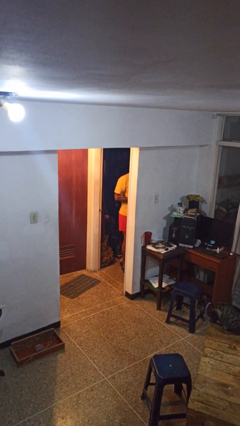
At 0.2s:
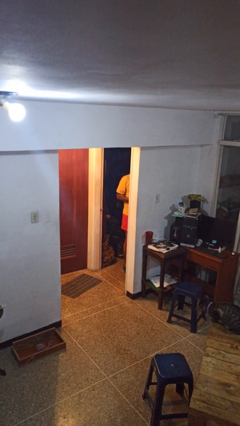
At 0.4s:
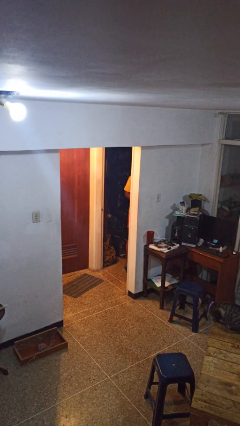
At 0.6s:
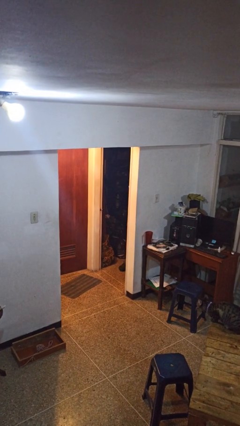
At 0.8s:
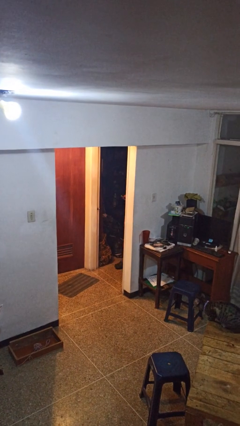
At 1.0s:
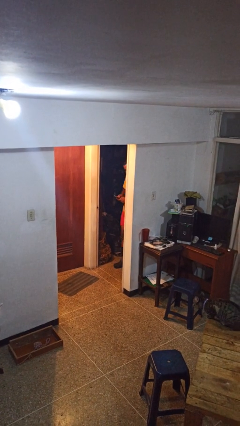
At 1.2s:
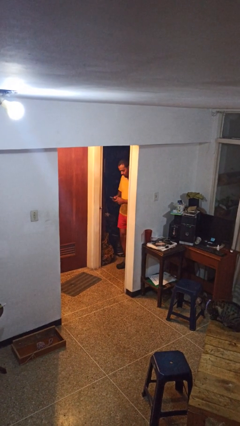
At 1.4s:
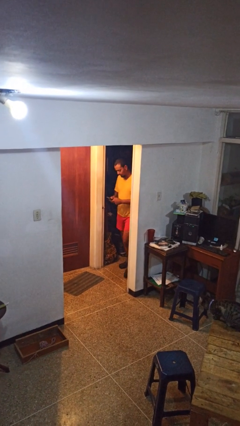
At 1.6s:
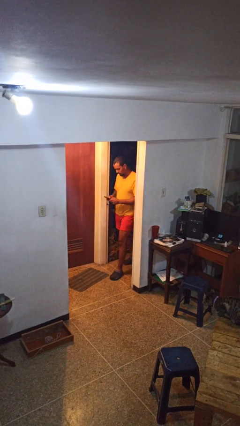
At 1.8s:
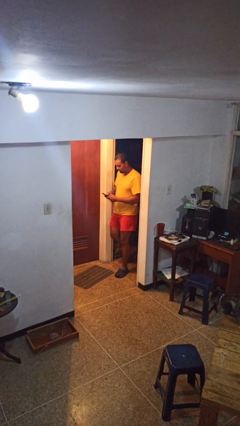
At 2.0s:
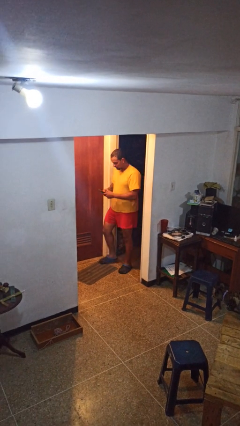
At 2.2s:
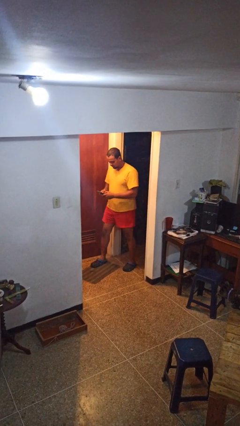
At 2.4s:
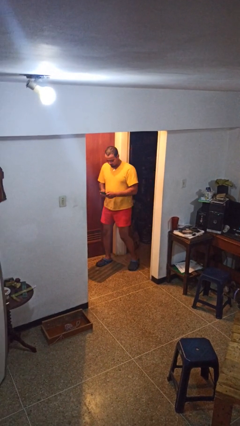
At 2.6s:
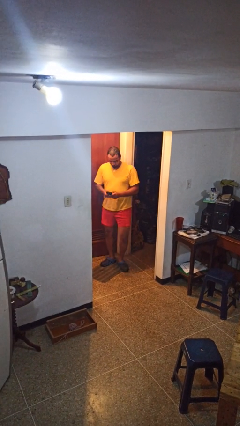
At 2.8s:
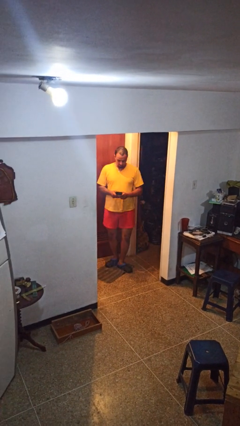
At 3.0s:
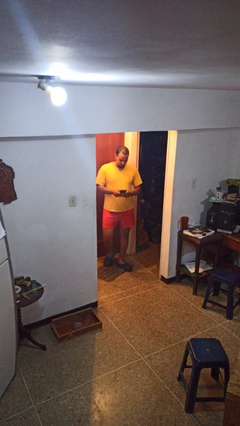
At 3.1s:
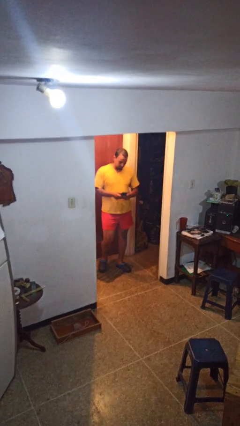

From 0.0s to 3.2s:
person enters scene through structure

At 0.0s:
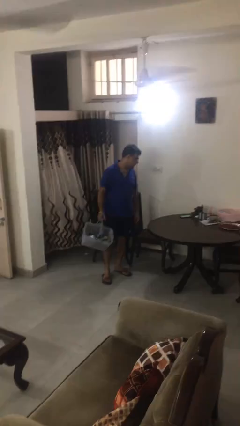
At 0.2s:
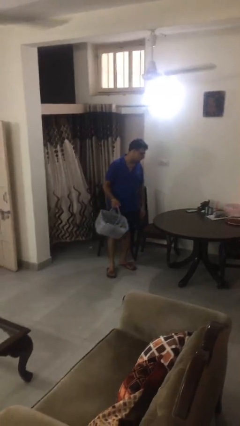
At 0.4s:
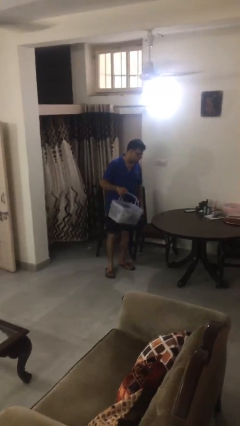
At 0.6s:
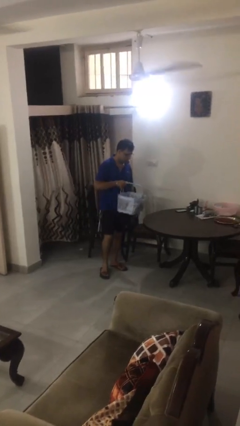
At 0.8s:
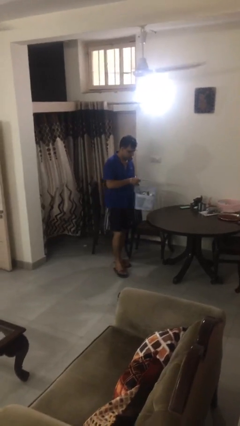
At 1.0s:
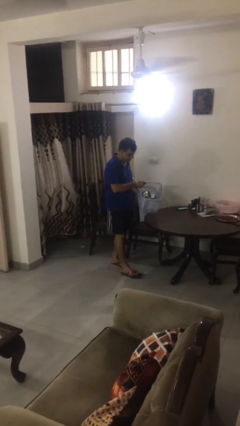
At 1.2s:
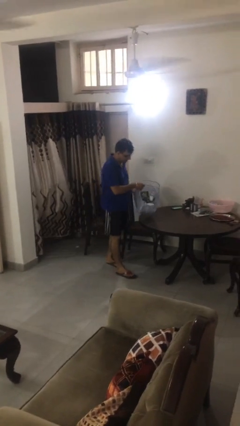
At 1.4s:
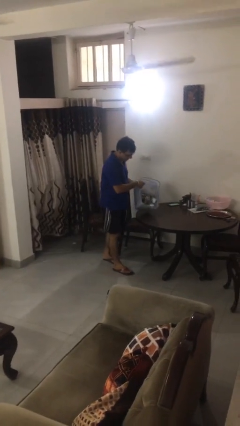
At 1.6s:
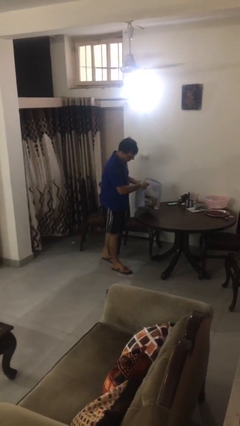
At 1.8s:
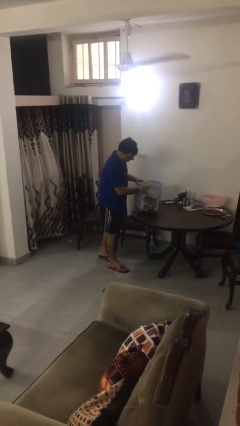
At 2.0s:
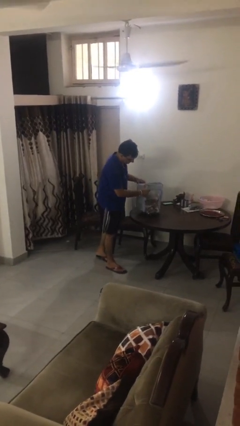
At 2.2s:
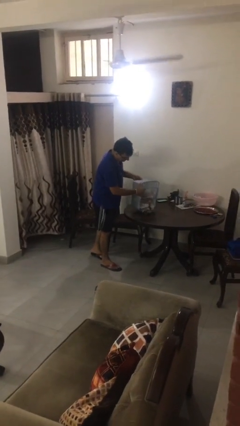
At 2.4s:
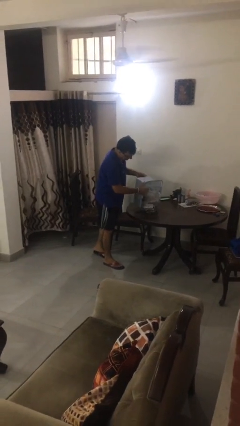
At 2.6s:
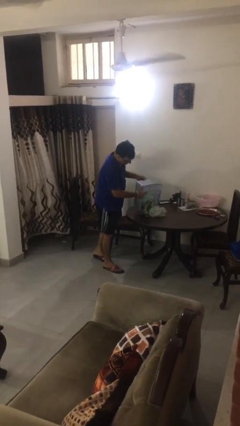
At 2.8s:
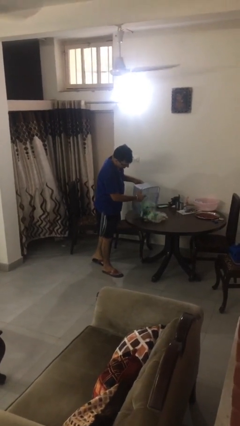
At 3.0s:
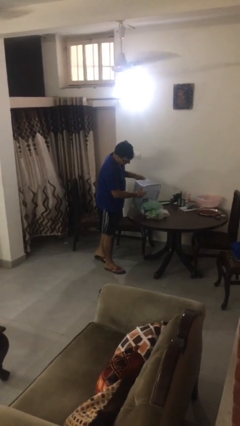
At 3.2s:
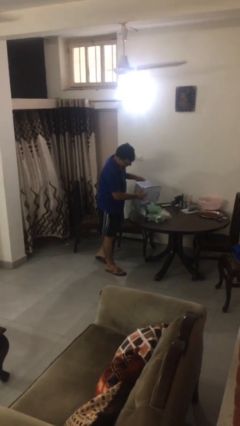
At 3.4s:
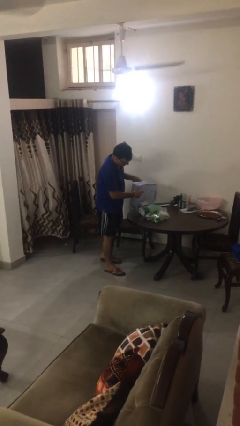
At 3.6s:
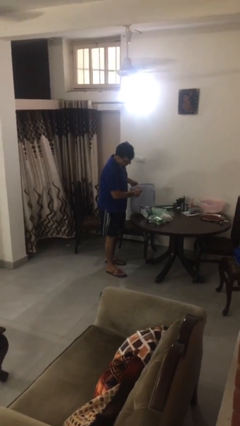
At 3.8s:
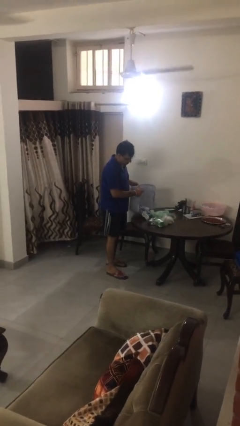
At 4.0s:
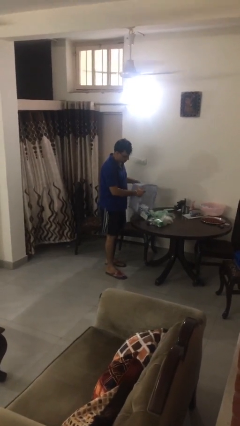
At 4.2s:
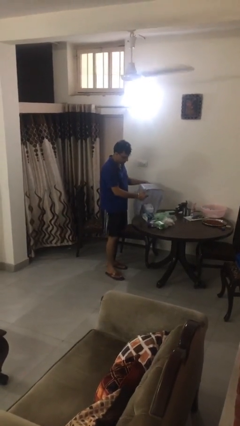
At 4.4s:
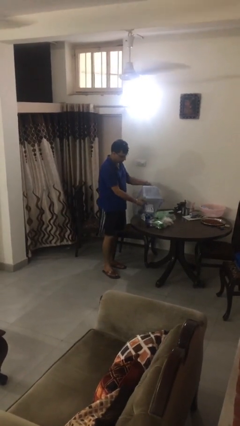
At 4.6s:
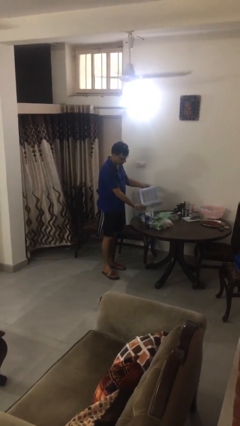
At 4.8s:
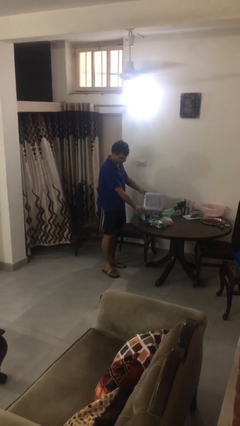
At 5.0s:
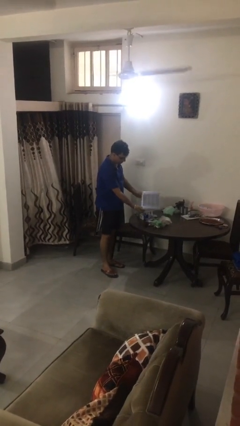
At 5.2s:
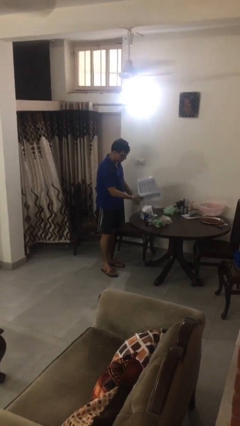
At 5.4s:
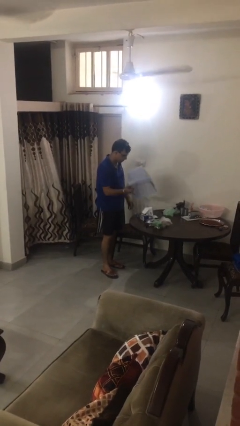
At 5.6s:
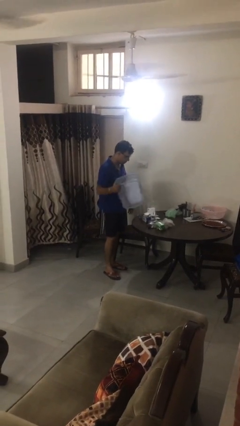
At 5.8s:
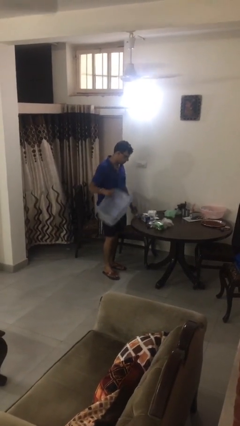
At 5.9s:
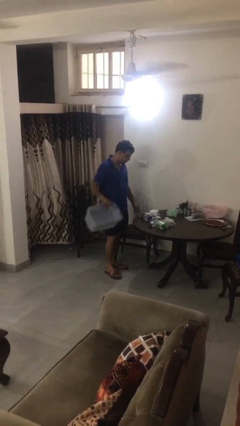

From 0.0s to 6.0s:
person unloads box onto table

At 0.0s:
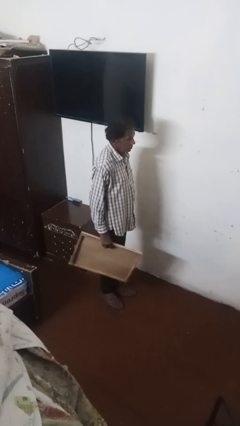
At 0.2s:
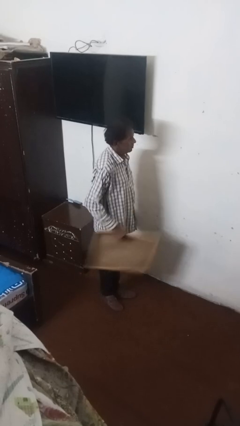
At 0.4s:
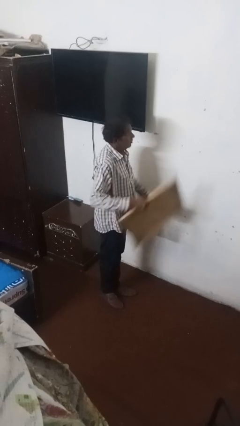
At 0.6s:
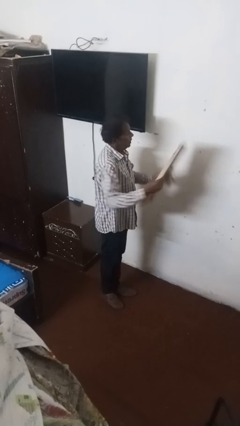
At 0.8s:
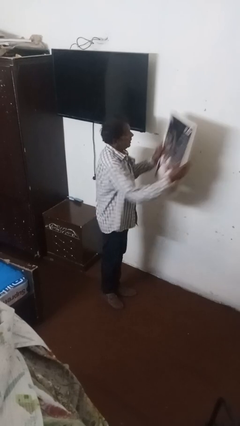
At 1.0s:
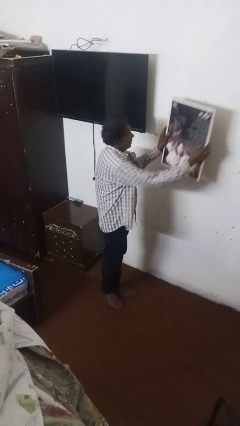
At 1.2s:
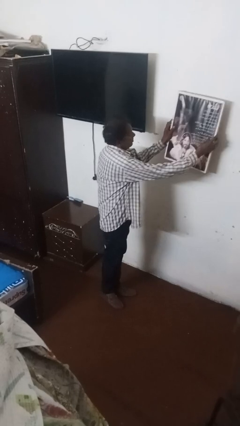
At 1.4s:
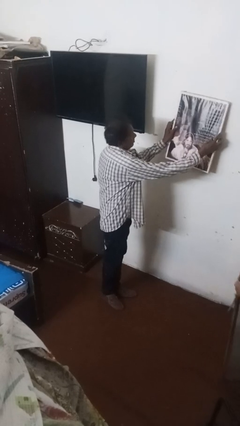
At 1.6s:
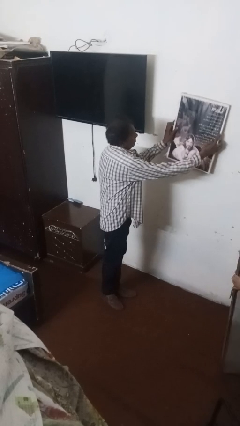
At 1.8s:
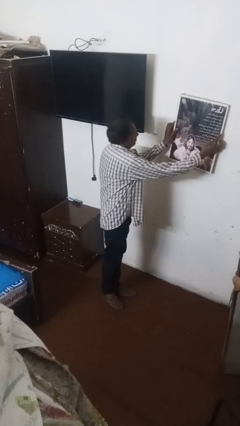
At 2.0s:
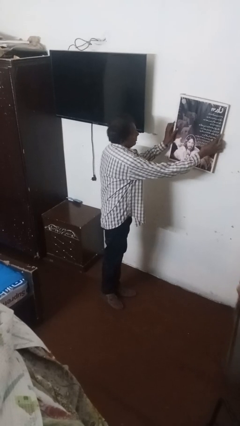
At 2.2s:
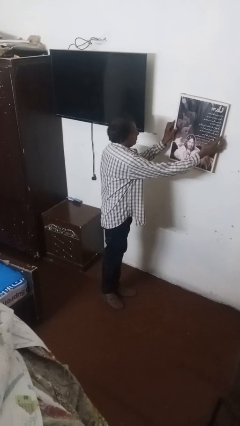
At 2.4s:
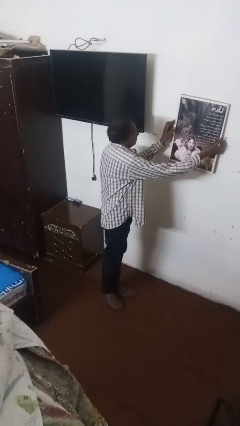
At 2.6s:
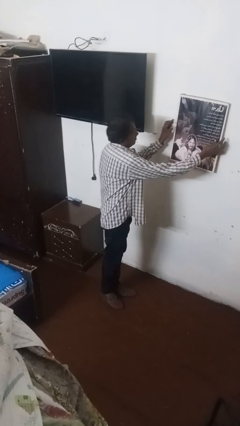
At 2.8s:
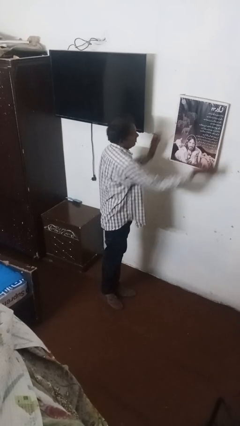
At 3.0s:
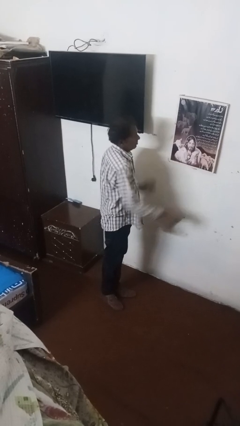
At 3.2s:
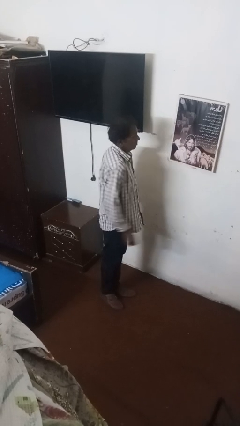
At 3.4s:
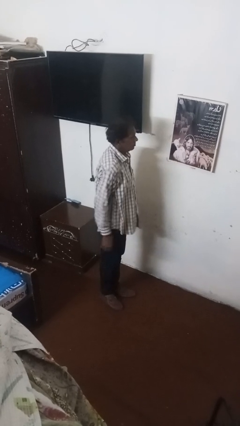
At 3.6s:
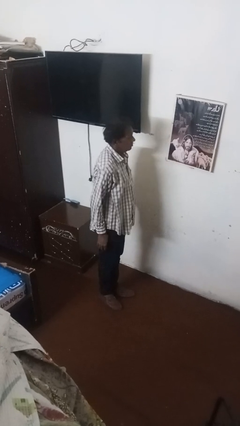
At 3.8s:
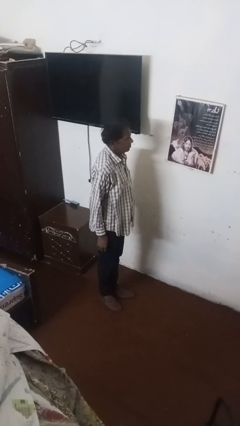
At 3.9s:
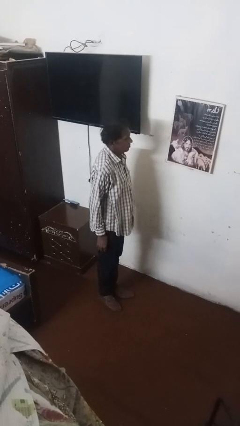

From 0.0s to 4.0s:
person puts up picture frame

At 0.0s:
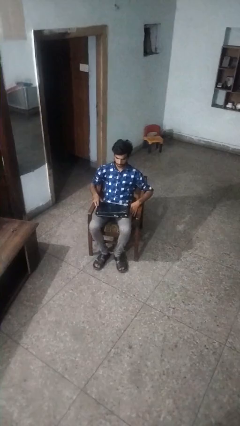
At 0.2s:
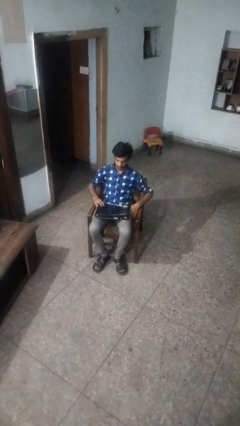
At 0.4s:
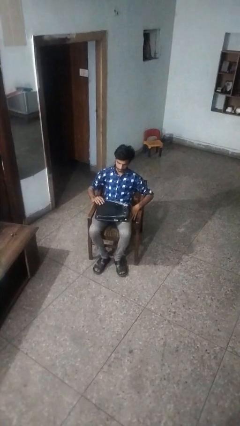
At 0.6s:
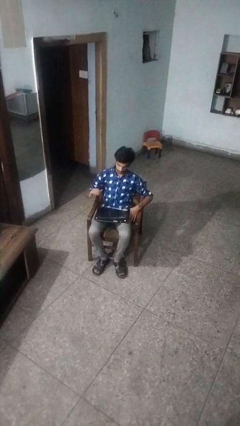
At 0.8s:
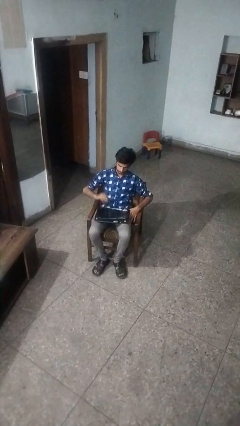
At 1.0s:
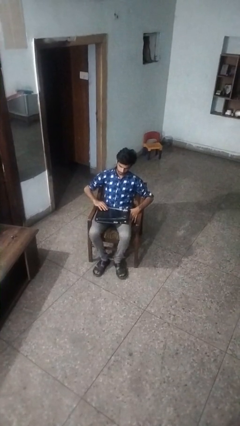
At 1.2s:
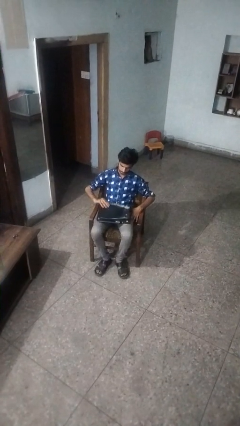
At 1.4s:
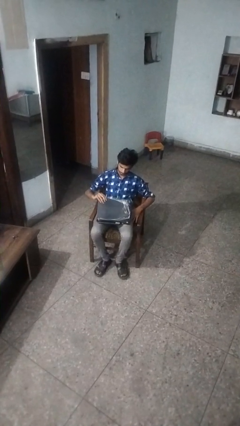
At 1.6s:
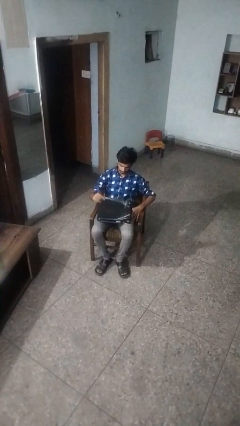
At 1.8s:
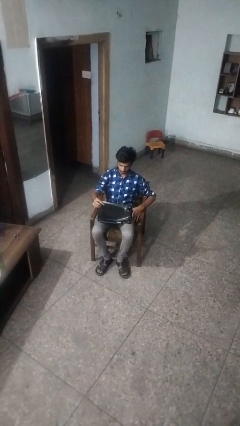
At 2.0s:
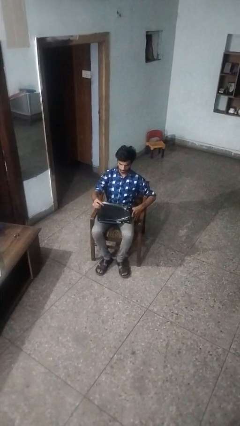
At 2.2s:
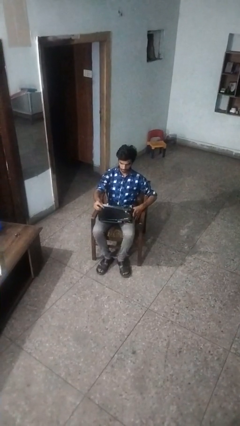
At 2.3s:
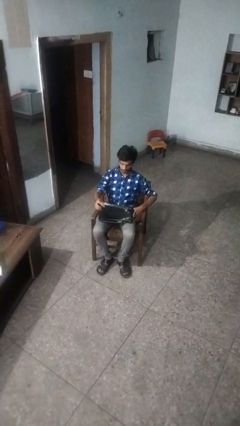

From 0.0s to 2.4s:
person opens laptop

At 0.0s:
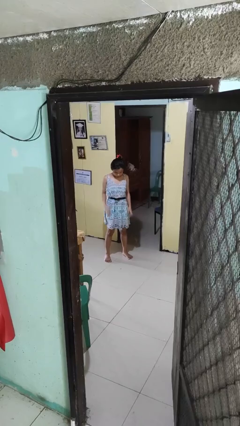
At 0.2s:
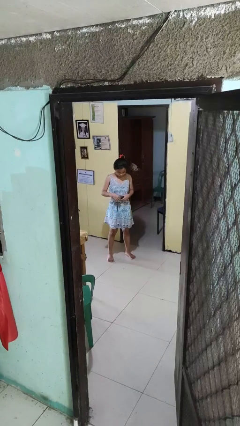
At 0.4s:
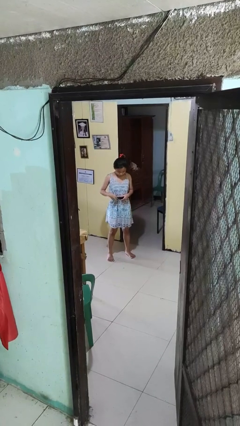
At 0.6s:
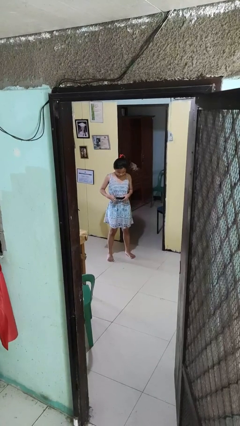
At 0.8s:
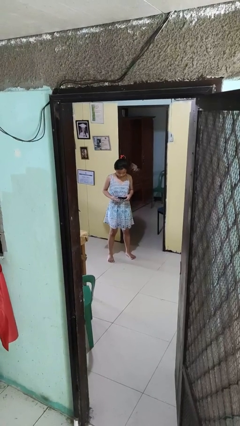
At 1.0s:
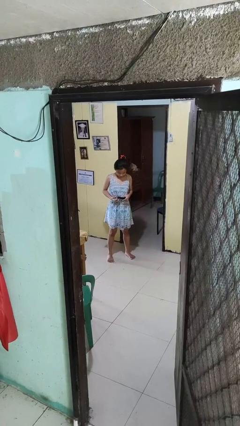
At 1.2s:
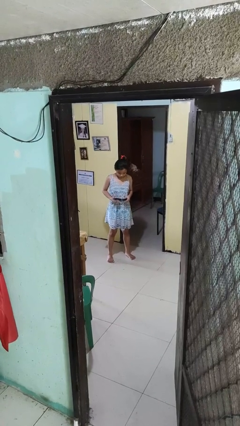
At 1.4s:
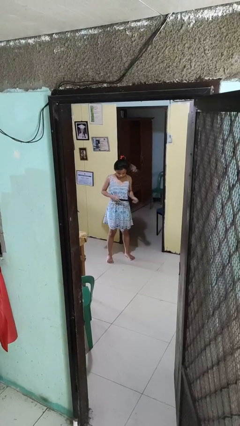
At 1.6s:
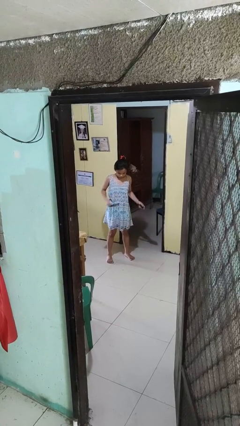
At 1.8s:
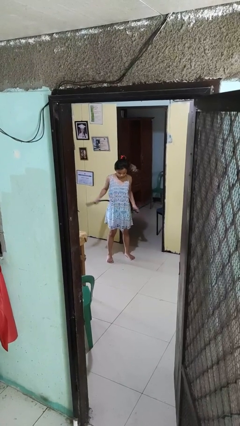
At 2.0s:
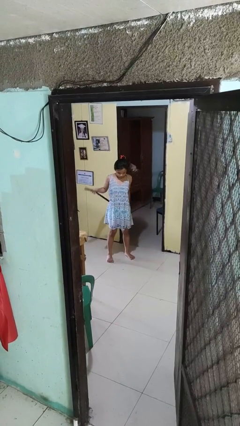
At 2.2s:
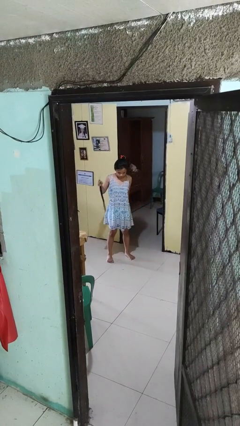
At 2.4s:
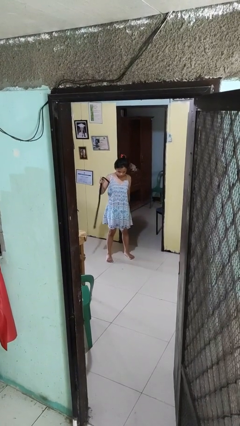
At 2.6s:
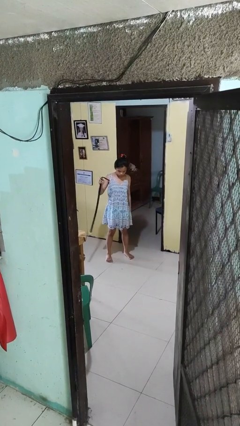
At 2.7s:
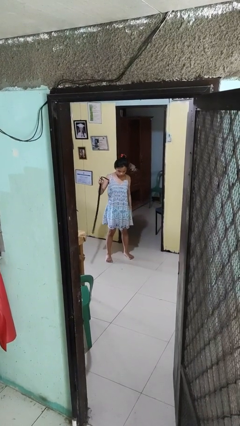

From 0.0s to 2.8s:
person takes off belt
